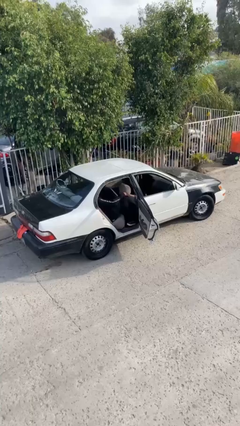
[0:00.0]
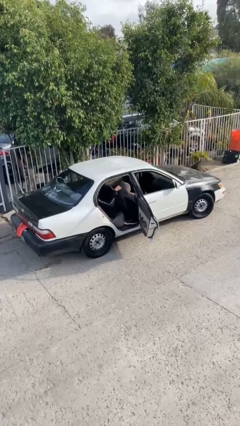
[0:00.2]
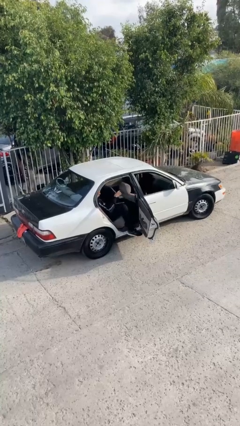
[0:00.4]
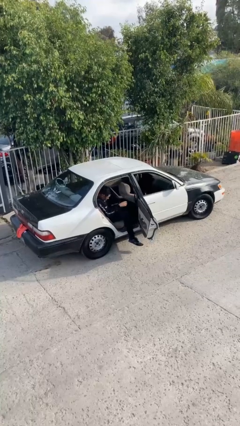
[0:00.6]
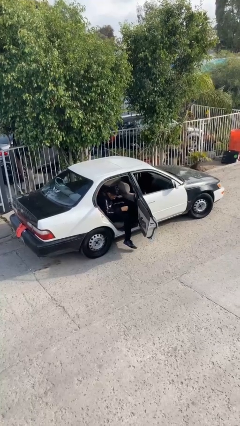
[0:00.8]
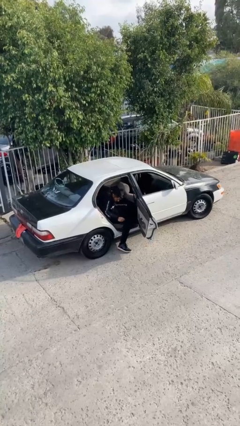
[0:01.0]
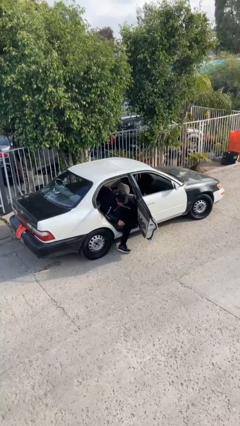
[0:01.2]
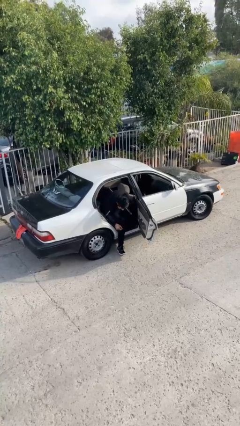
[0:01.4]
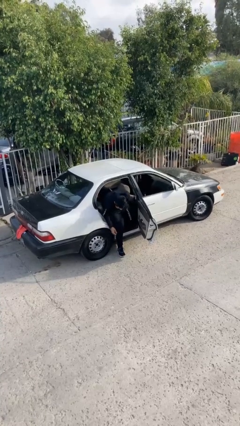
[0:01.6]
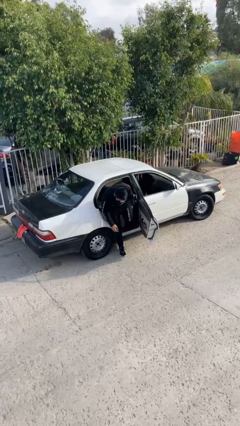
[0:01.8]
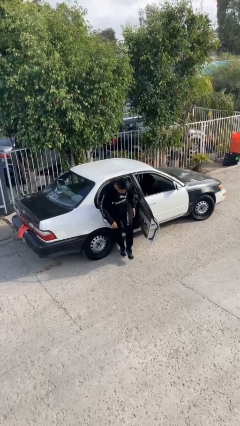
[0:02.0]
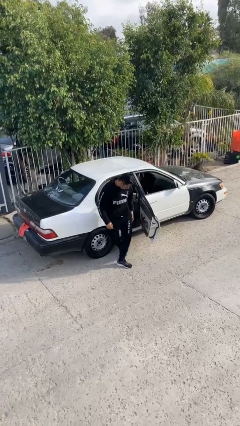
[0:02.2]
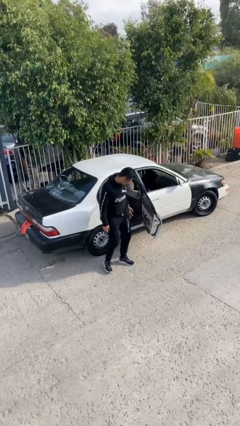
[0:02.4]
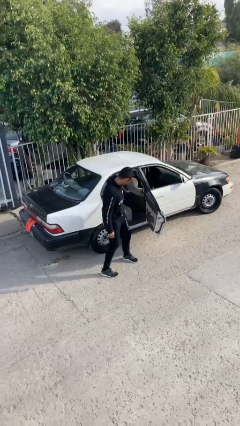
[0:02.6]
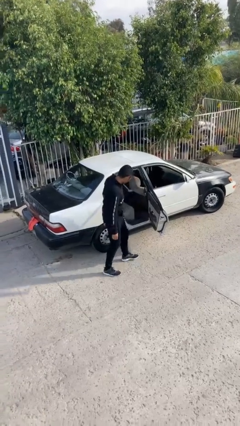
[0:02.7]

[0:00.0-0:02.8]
person exits car

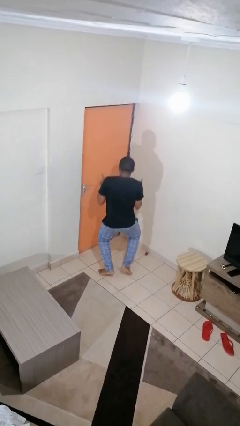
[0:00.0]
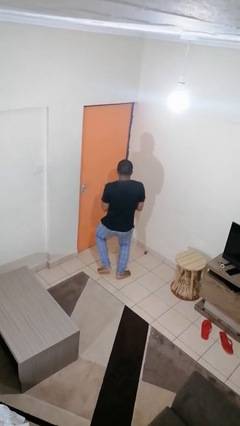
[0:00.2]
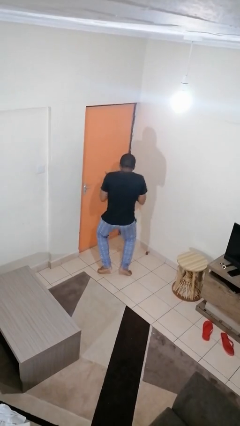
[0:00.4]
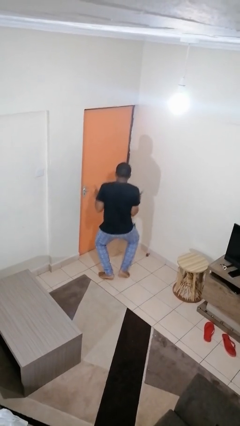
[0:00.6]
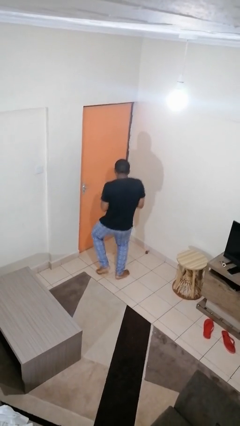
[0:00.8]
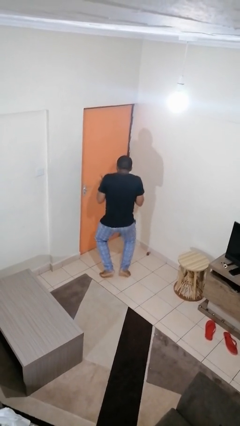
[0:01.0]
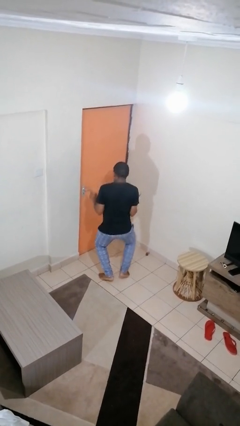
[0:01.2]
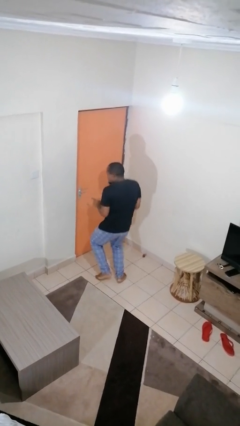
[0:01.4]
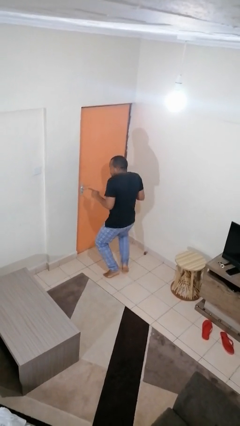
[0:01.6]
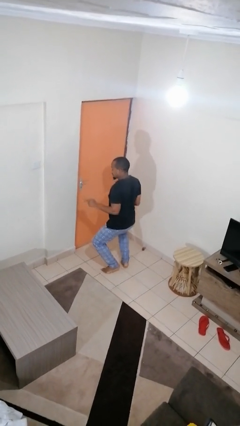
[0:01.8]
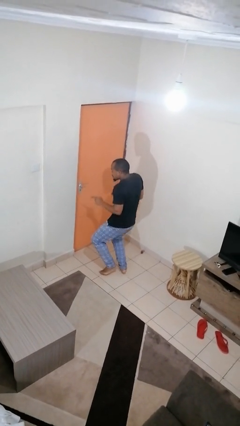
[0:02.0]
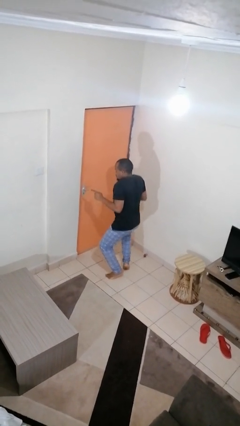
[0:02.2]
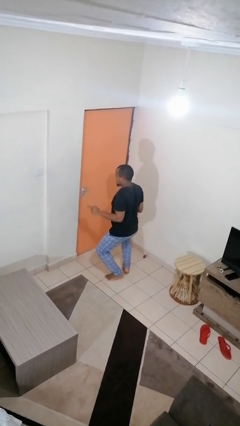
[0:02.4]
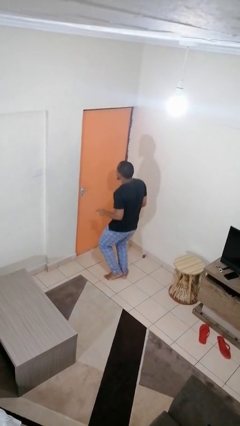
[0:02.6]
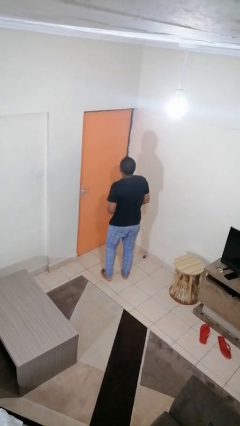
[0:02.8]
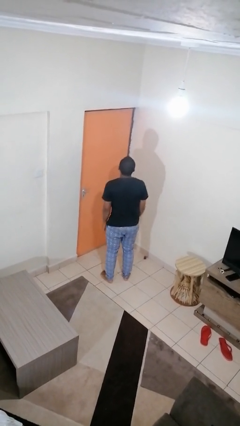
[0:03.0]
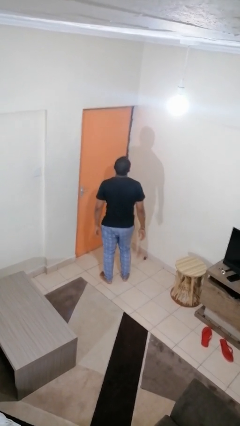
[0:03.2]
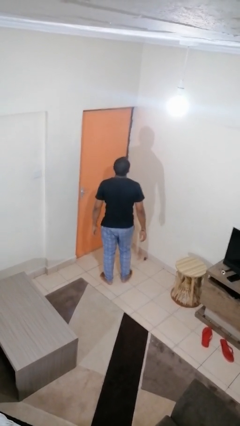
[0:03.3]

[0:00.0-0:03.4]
person dances in place

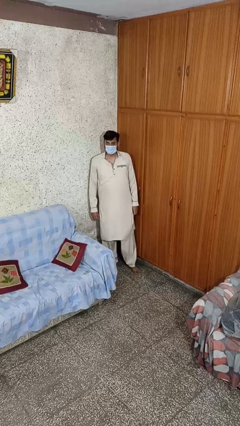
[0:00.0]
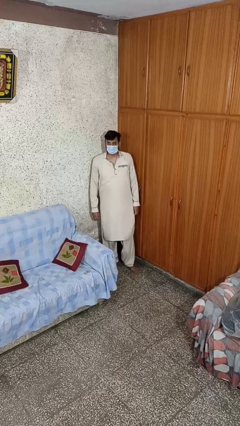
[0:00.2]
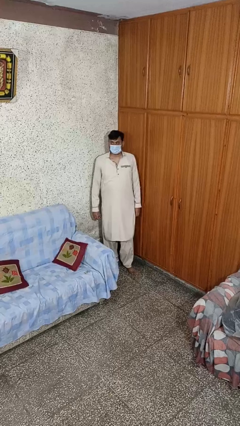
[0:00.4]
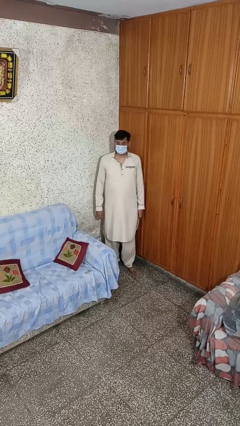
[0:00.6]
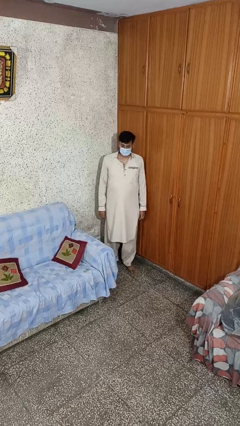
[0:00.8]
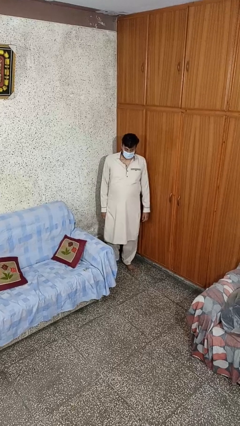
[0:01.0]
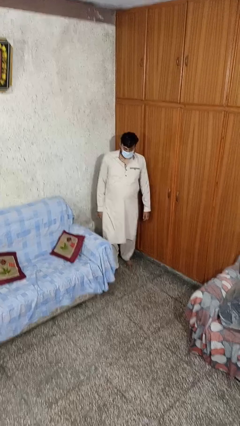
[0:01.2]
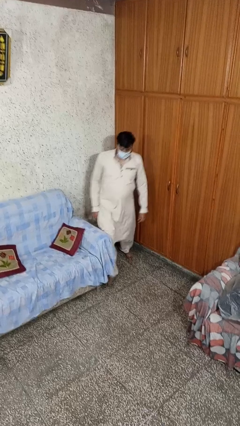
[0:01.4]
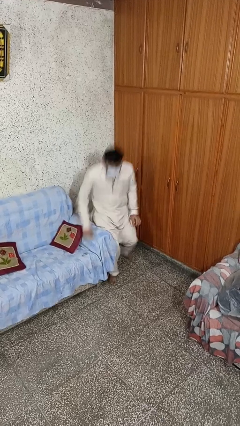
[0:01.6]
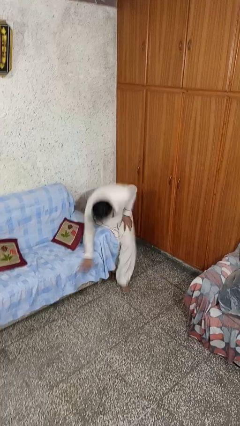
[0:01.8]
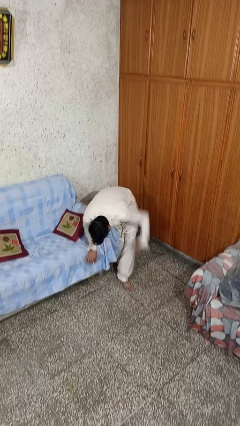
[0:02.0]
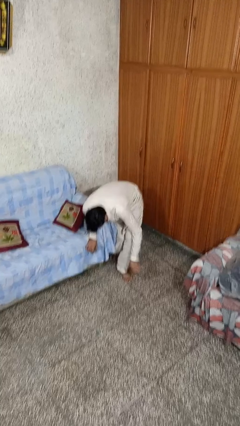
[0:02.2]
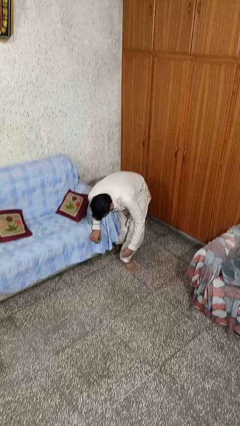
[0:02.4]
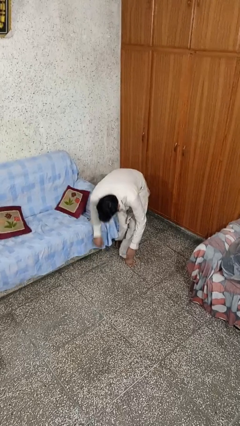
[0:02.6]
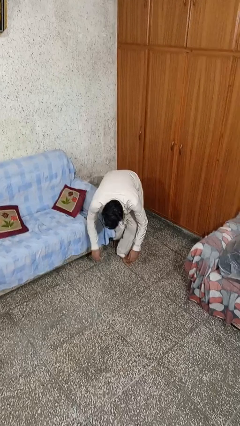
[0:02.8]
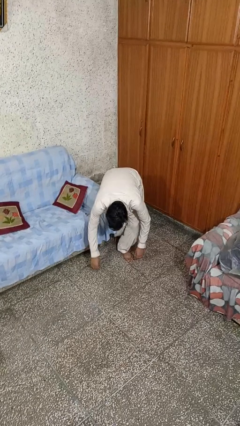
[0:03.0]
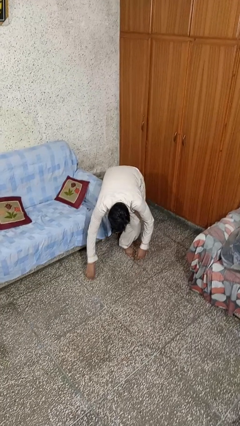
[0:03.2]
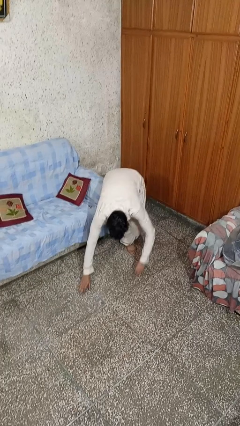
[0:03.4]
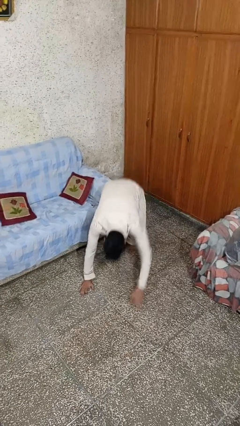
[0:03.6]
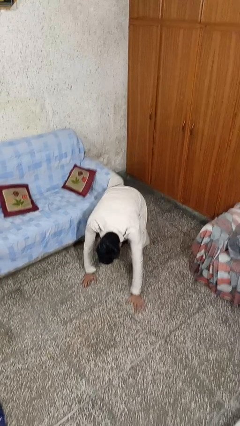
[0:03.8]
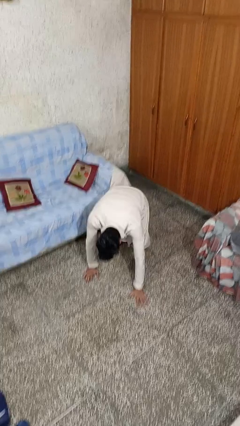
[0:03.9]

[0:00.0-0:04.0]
person trips on object on floor

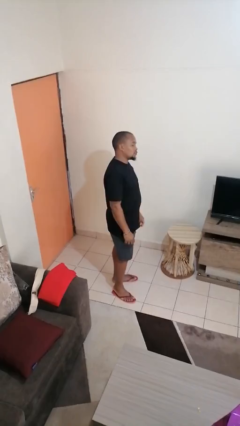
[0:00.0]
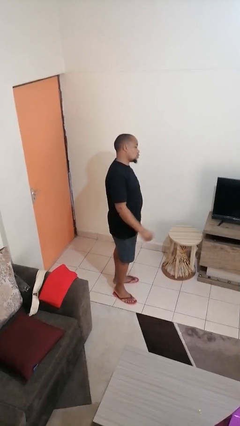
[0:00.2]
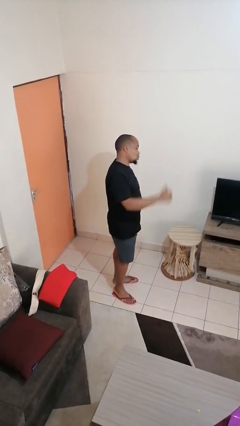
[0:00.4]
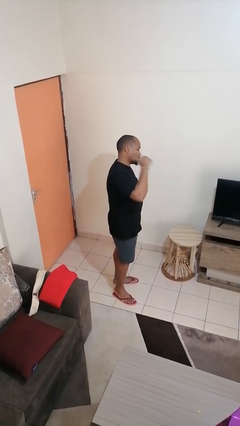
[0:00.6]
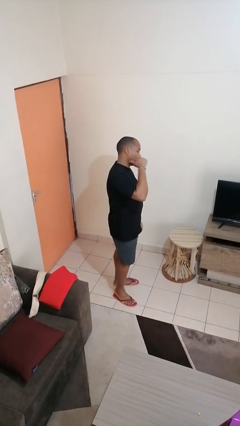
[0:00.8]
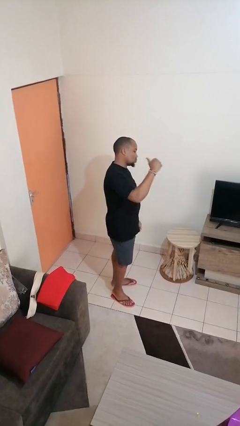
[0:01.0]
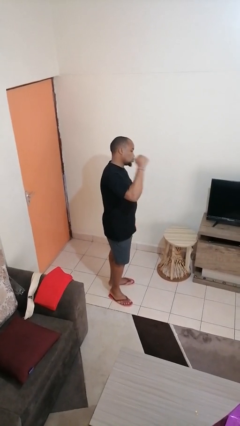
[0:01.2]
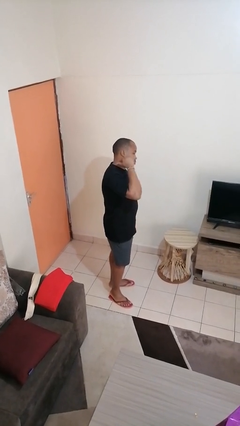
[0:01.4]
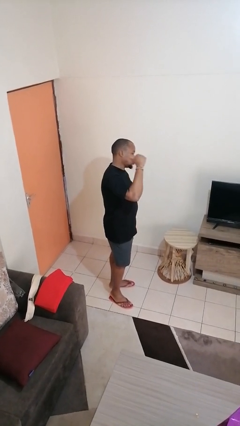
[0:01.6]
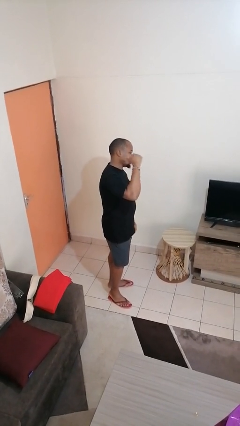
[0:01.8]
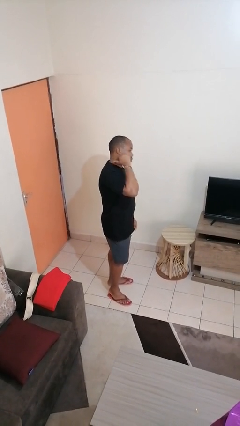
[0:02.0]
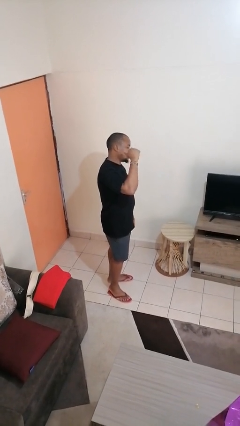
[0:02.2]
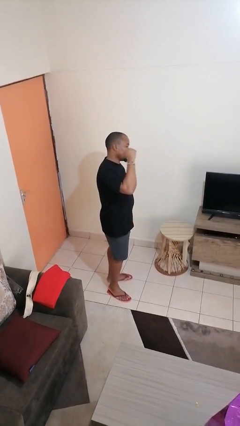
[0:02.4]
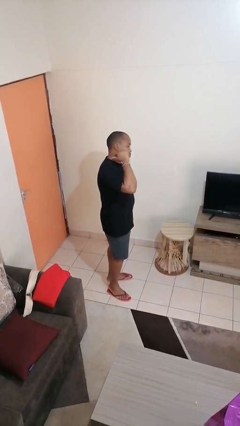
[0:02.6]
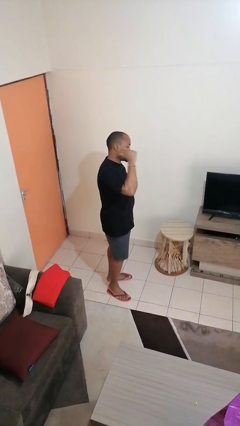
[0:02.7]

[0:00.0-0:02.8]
person gestures behind me

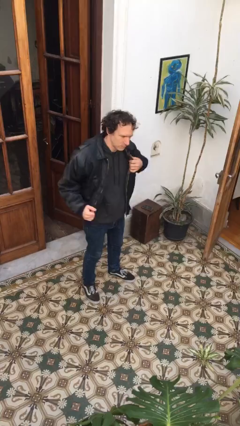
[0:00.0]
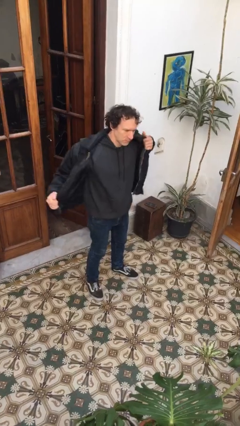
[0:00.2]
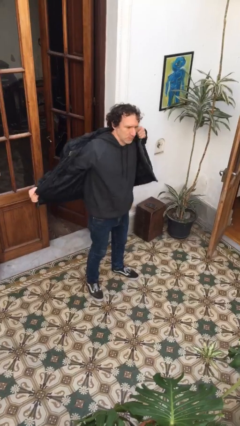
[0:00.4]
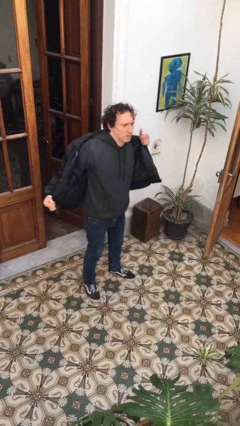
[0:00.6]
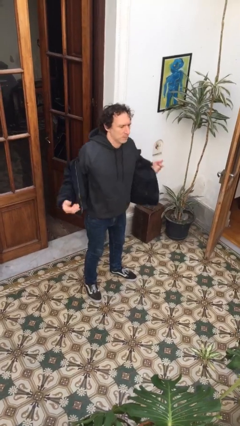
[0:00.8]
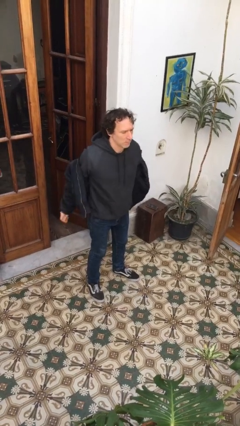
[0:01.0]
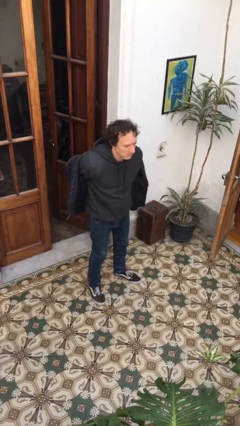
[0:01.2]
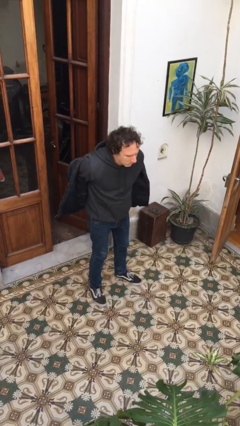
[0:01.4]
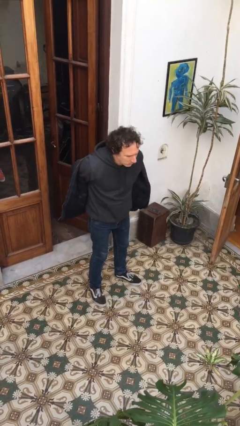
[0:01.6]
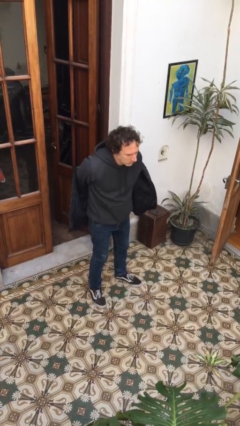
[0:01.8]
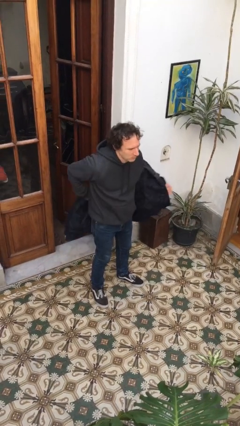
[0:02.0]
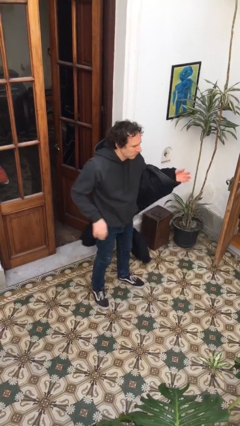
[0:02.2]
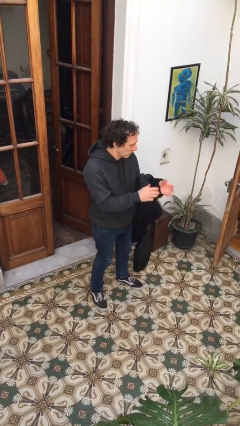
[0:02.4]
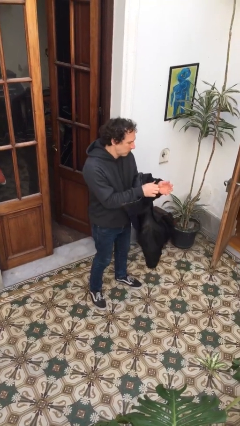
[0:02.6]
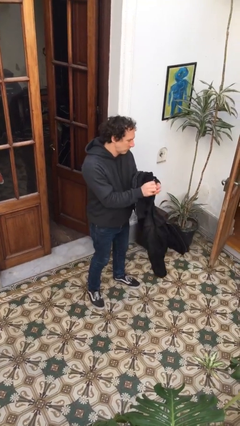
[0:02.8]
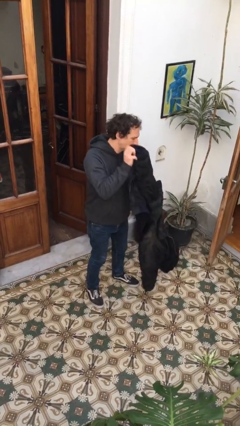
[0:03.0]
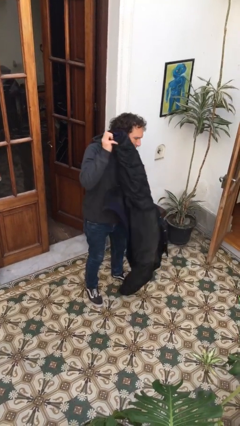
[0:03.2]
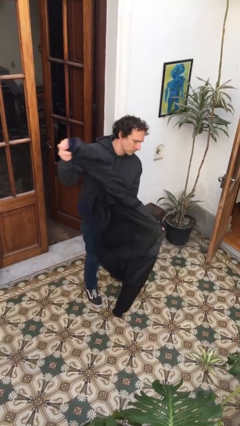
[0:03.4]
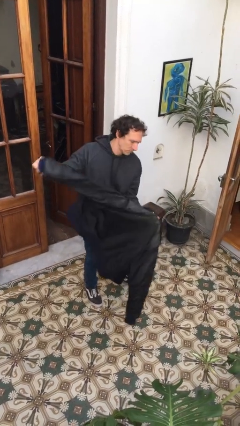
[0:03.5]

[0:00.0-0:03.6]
person takes off jacket

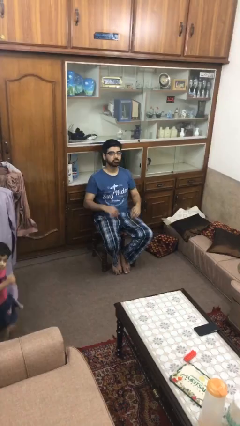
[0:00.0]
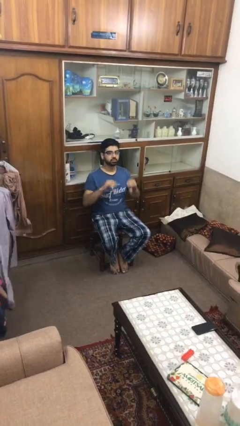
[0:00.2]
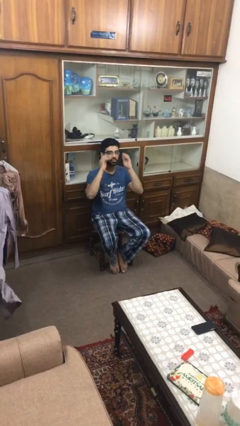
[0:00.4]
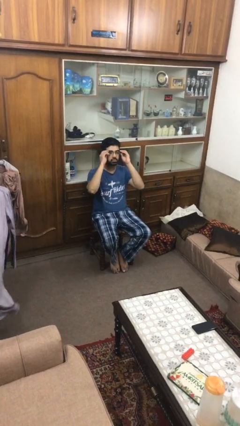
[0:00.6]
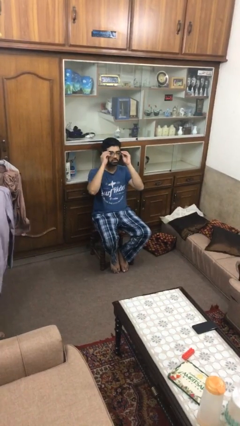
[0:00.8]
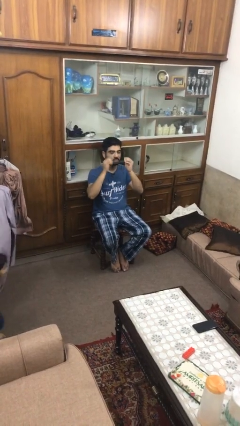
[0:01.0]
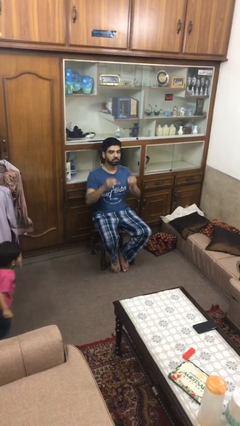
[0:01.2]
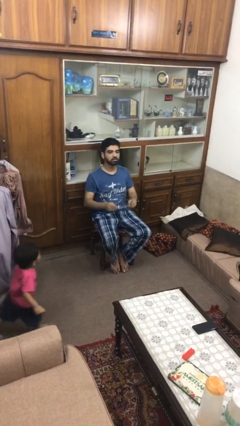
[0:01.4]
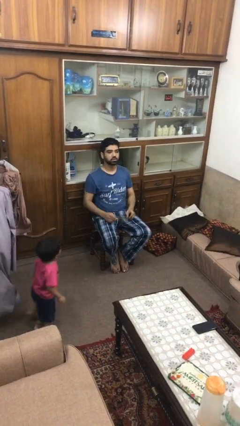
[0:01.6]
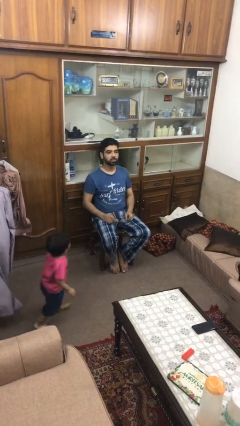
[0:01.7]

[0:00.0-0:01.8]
person takes off glasses
